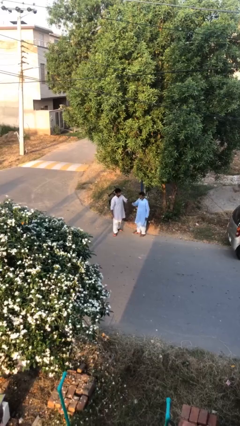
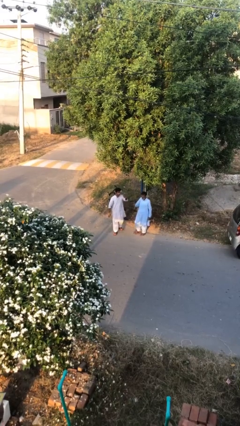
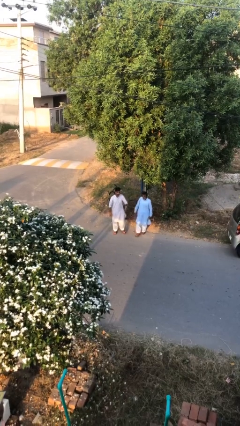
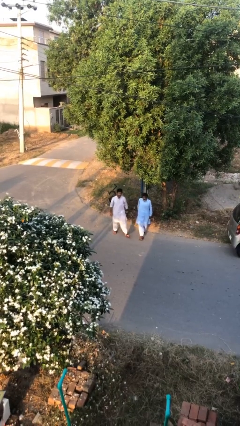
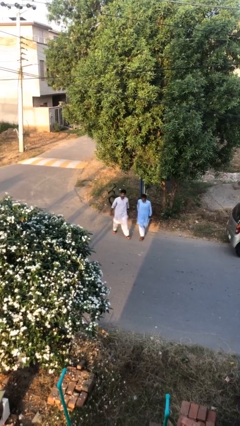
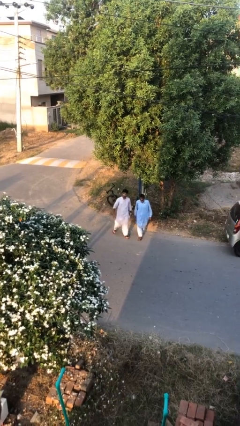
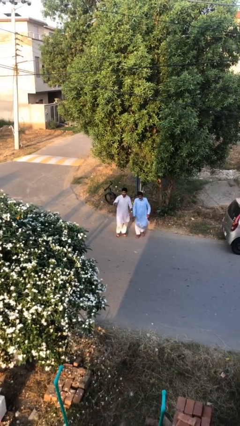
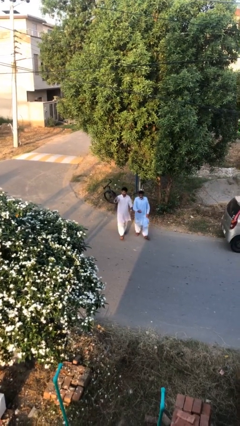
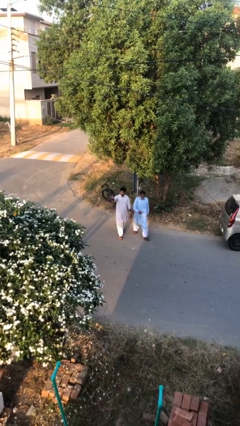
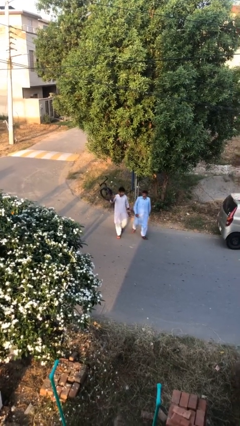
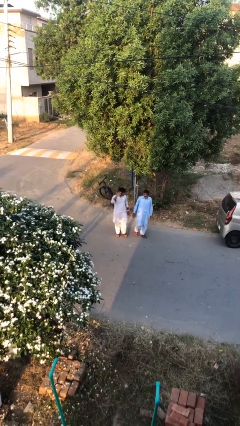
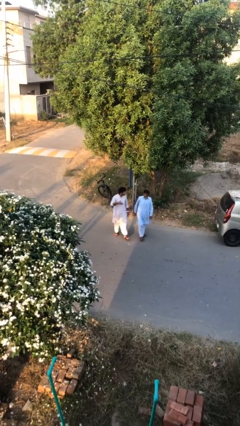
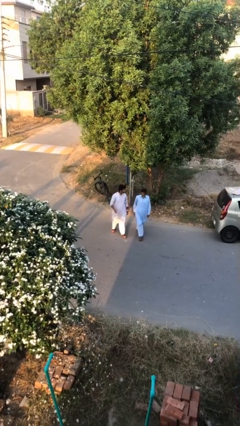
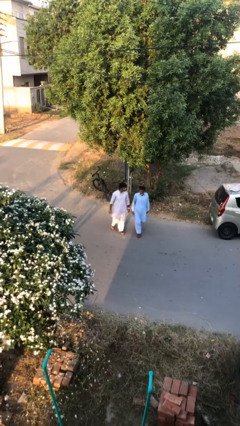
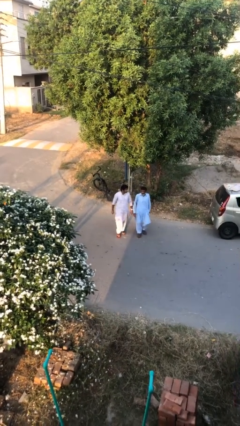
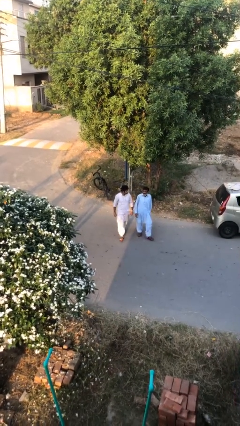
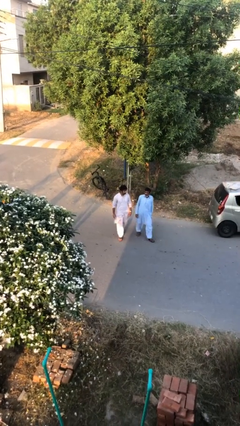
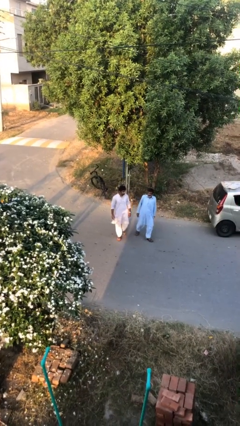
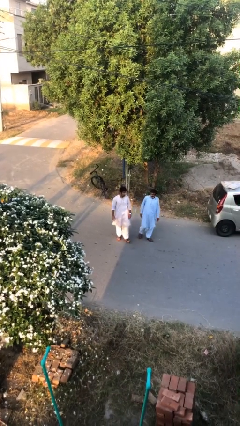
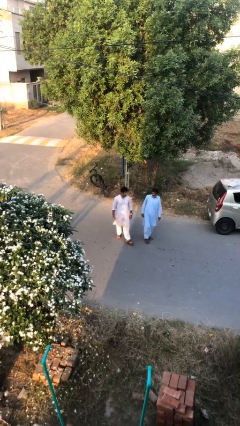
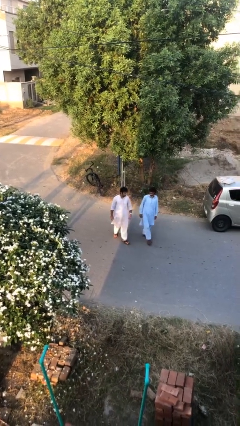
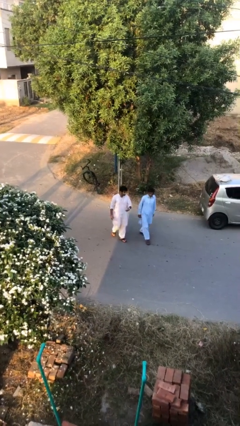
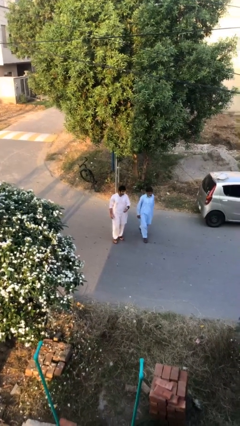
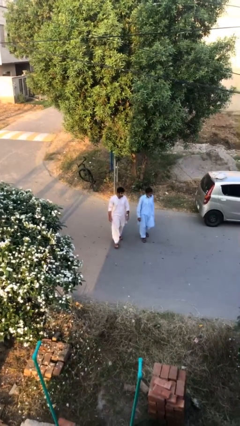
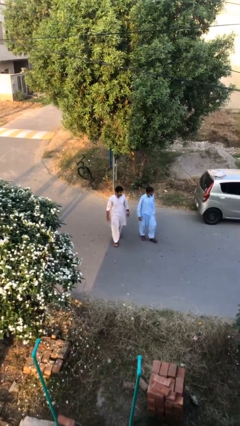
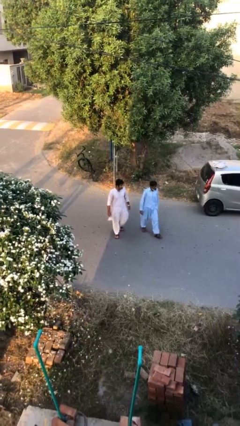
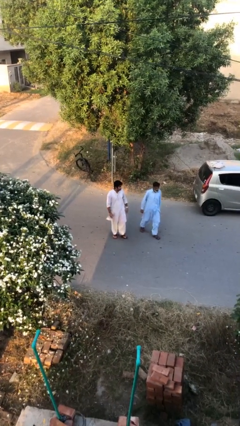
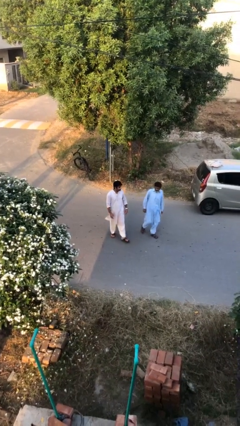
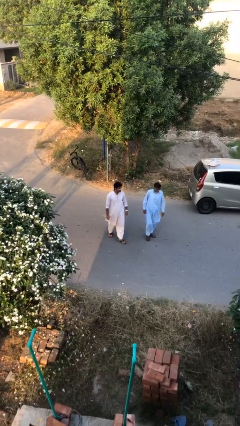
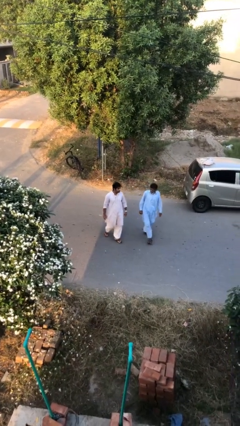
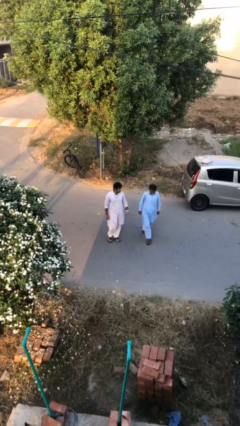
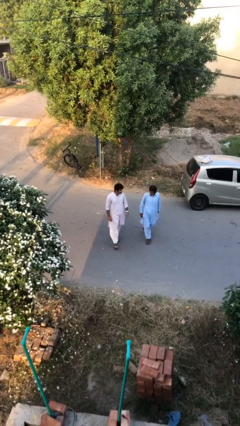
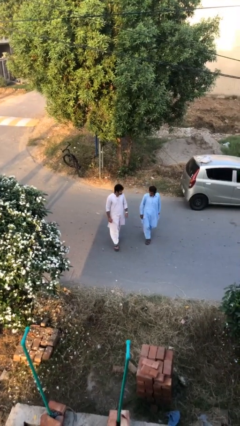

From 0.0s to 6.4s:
person talks to person

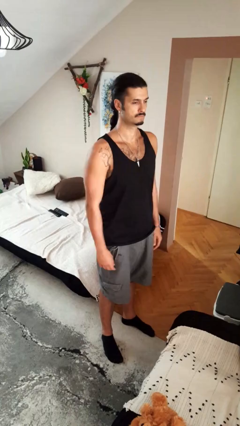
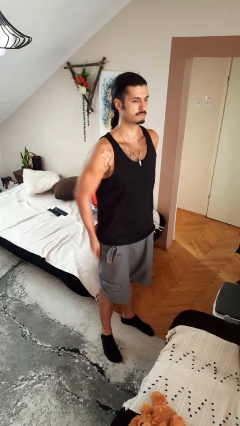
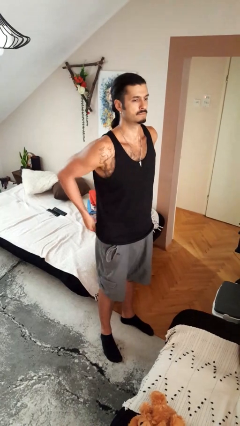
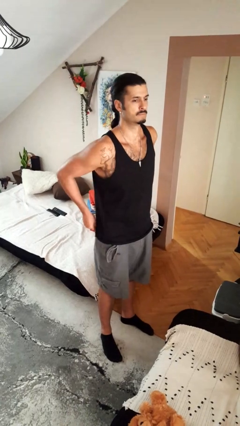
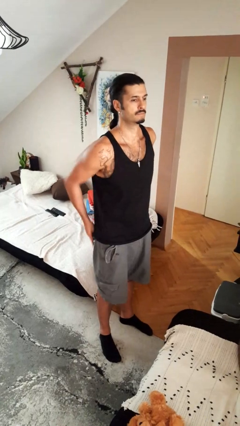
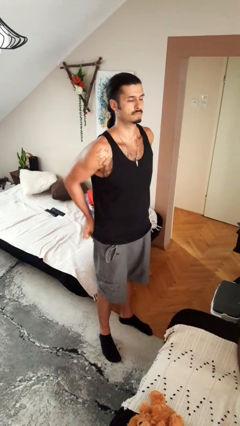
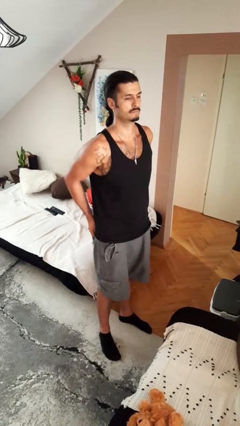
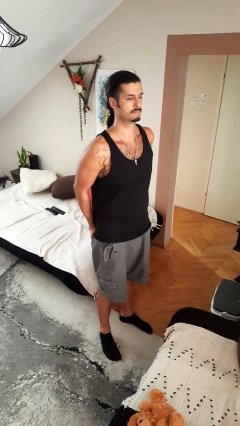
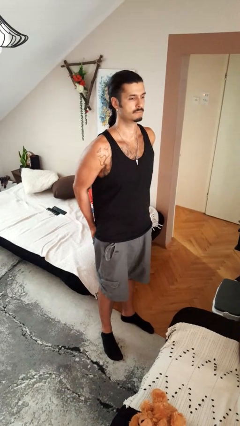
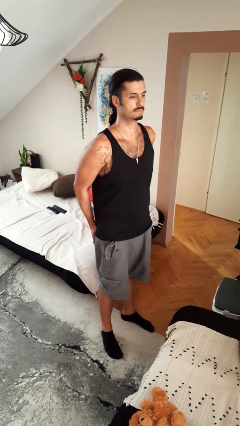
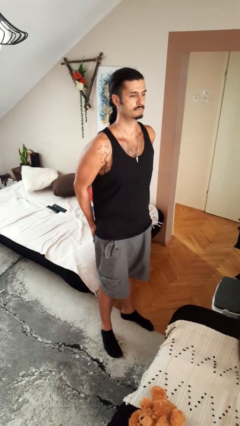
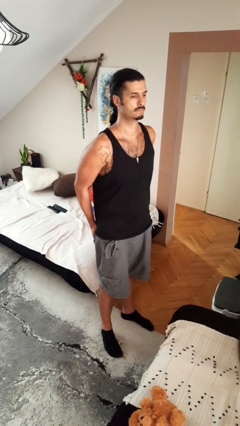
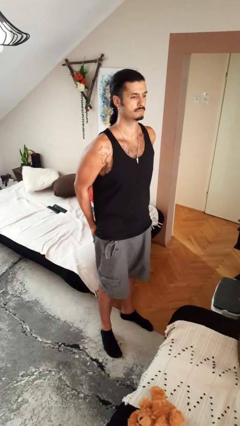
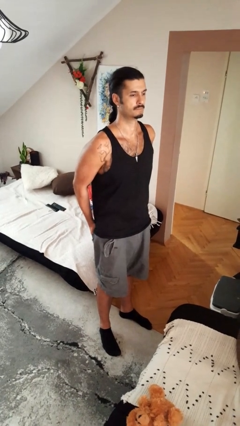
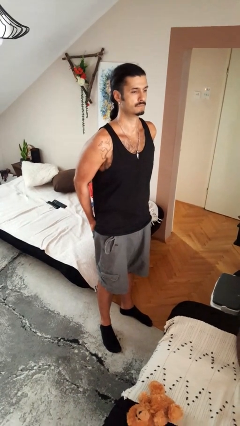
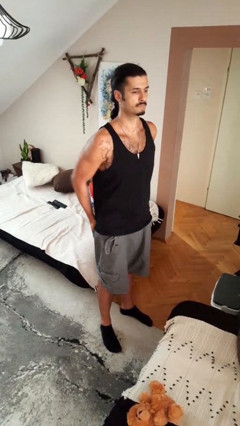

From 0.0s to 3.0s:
person puts hands in back pockets

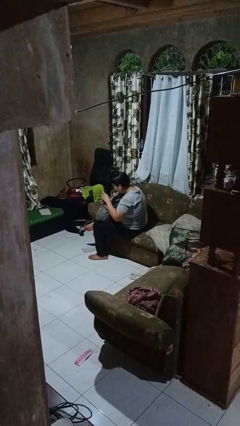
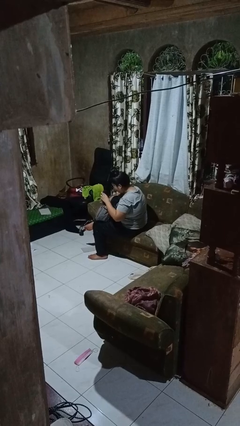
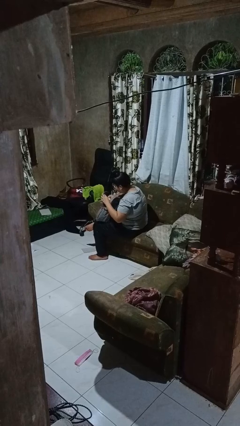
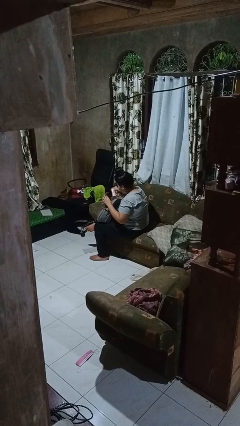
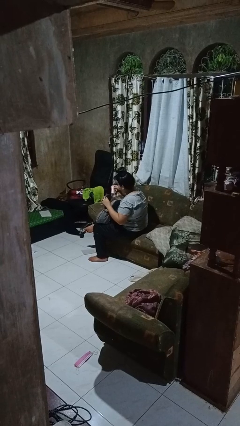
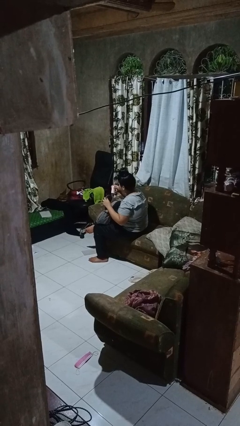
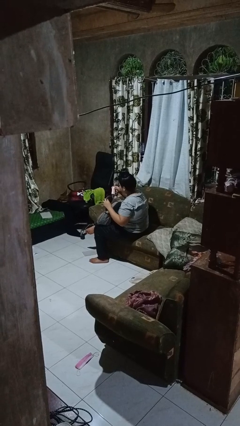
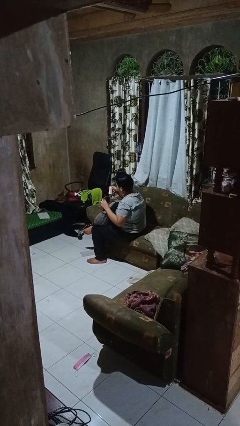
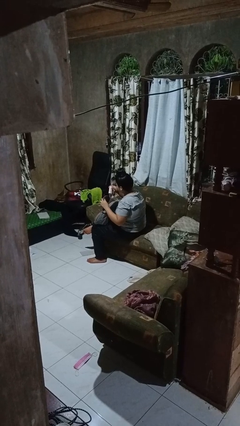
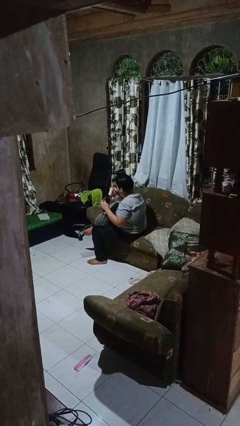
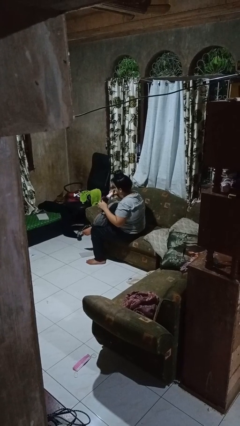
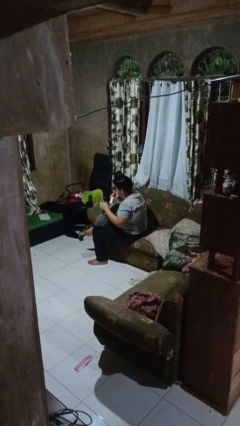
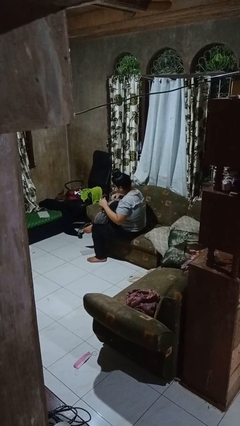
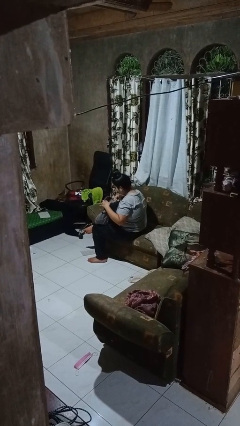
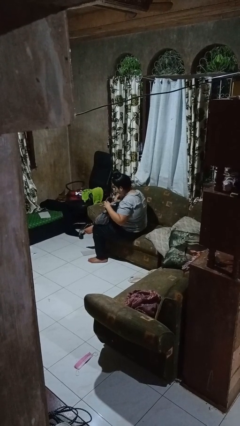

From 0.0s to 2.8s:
person takes object from backpack

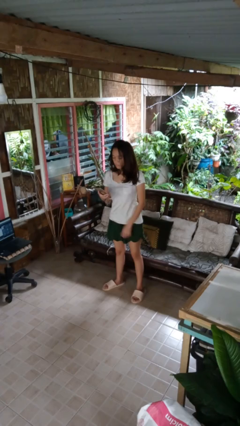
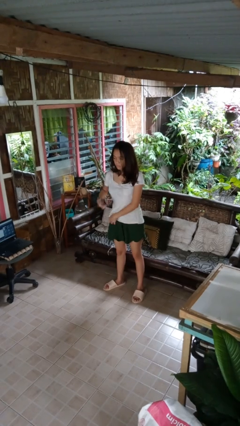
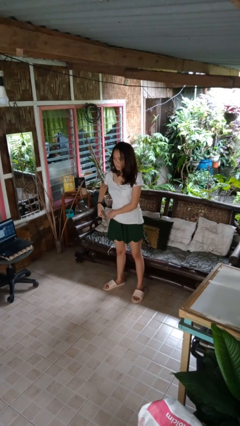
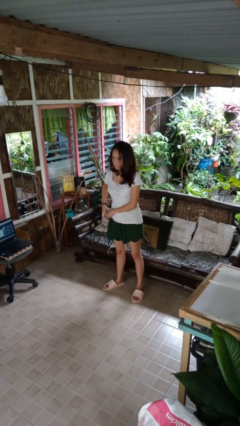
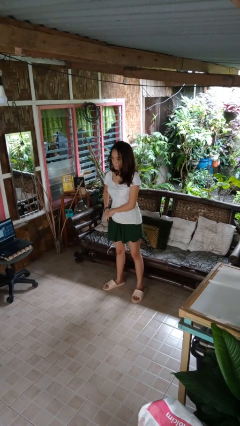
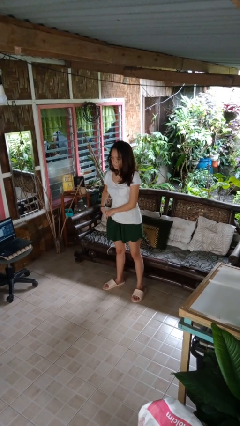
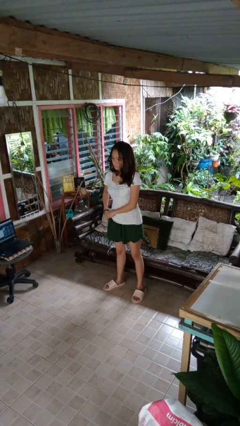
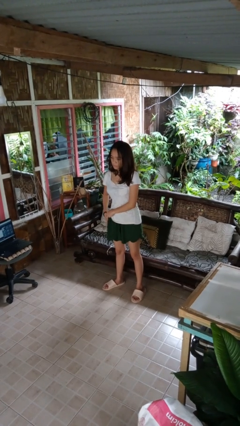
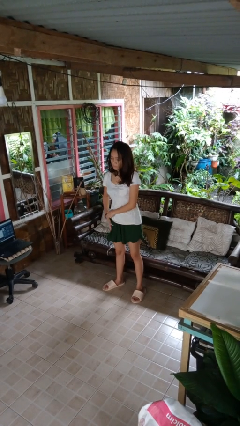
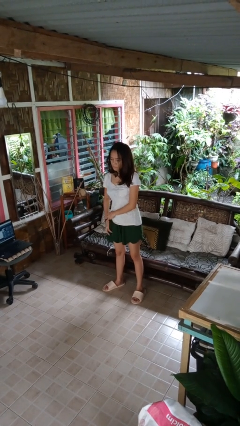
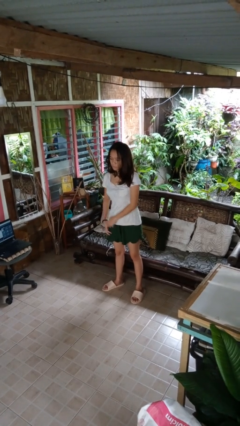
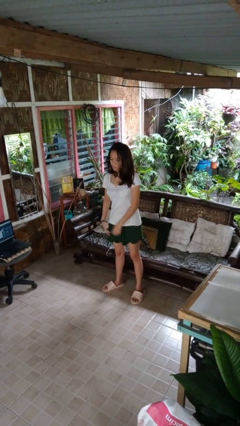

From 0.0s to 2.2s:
person puts phone into pocket

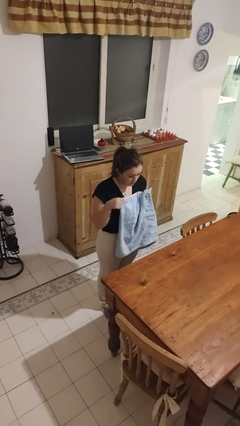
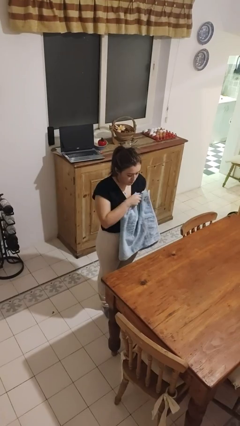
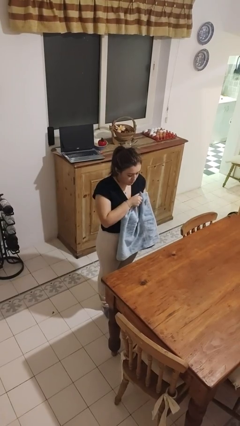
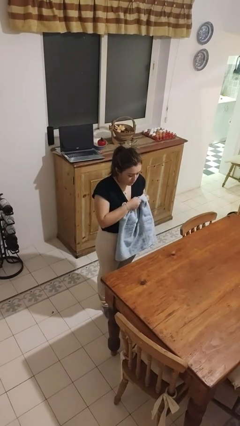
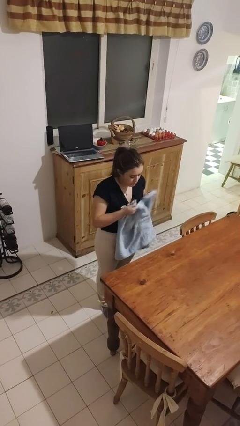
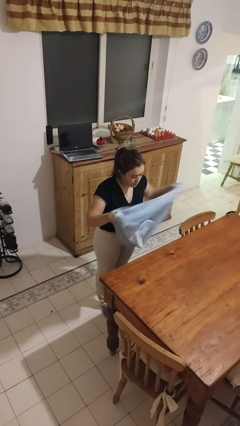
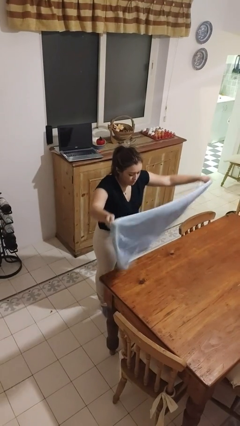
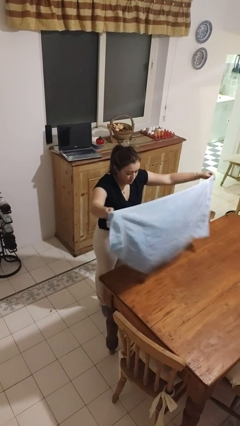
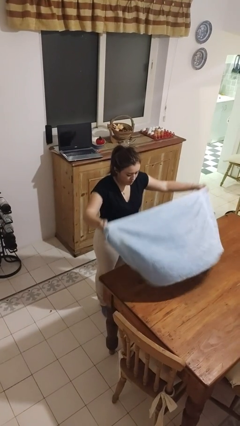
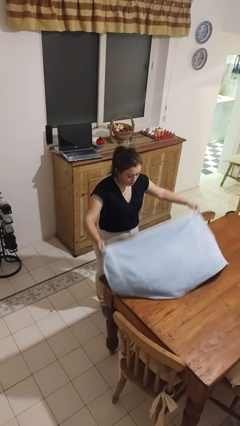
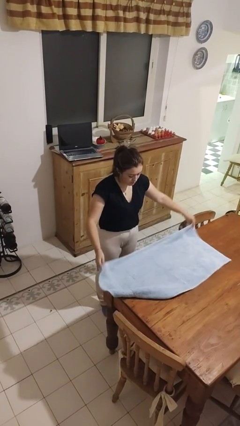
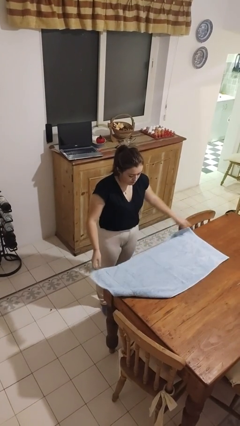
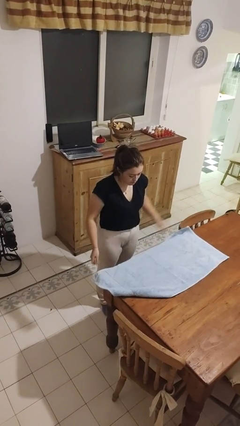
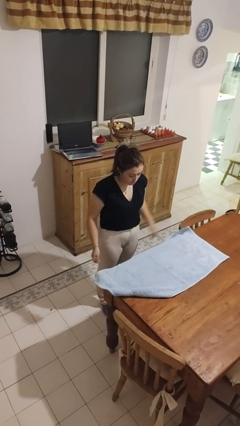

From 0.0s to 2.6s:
person spreads tablecloth

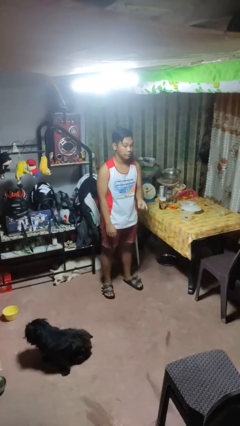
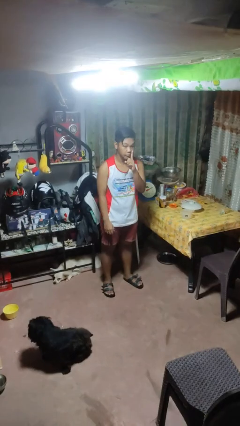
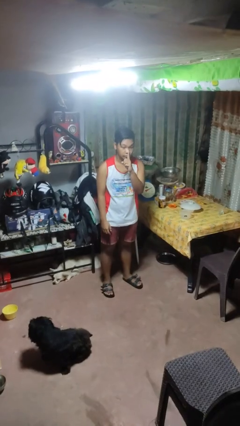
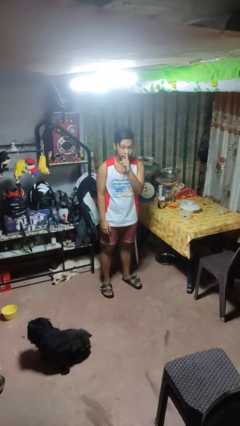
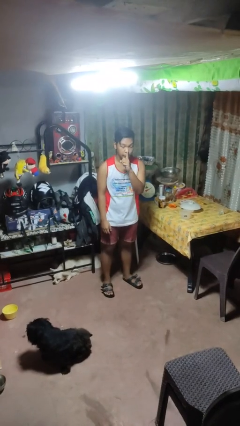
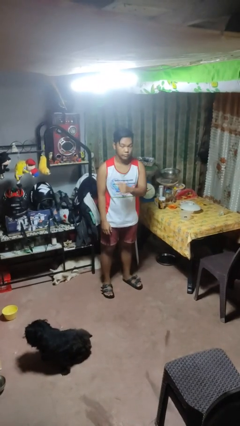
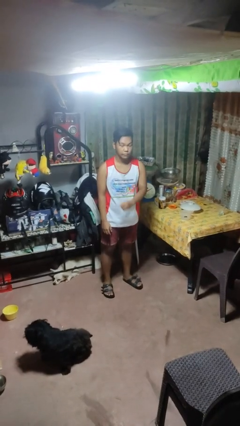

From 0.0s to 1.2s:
person gestures be quiet
